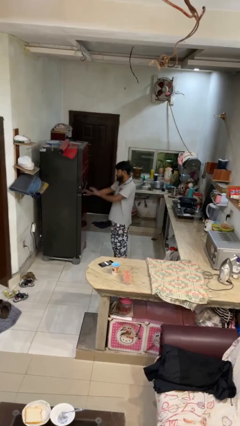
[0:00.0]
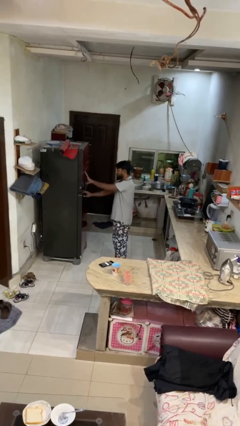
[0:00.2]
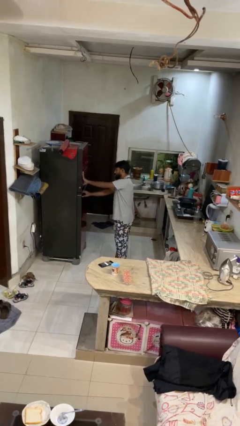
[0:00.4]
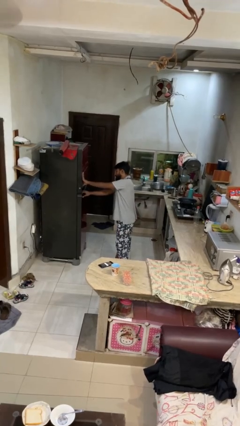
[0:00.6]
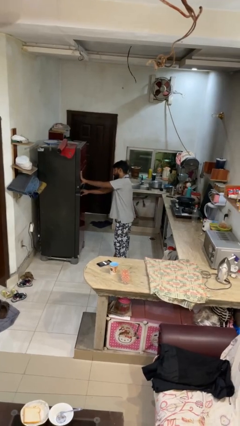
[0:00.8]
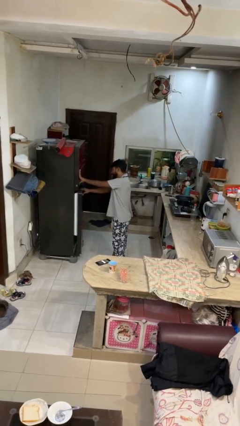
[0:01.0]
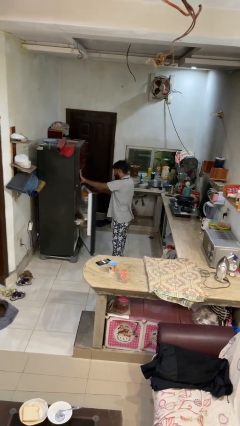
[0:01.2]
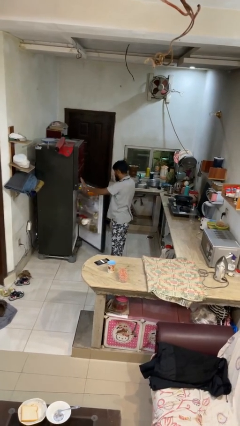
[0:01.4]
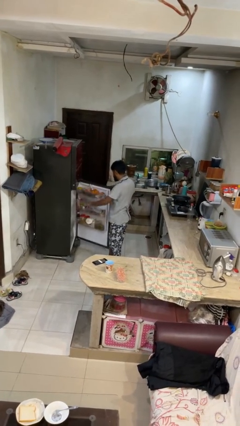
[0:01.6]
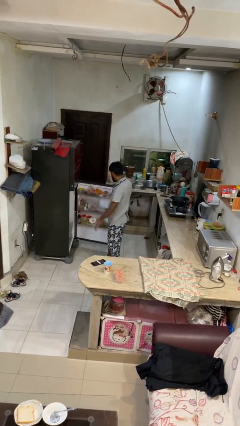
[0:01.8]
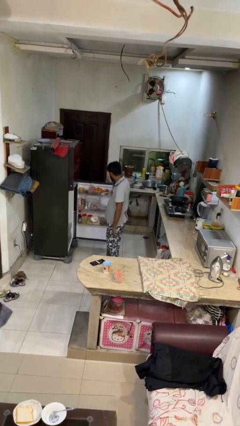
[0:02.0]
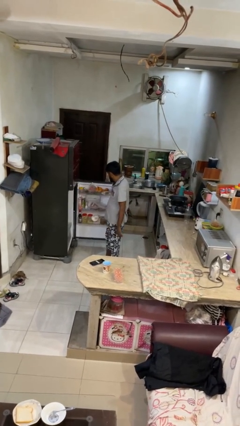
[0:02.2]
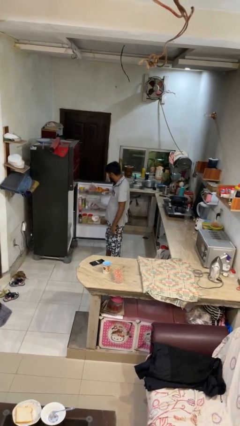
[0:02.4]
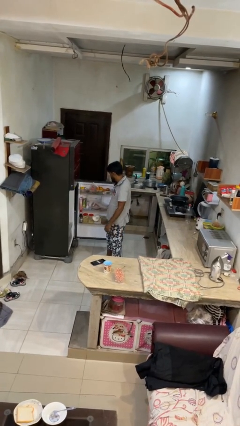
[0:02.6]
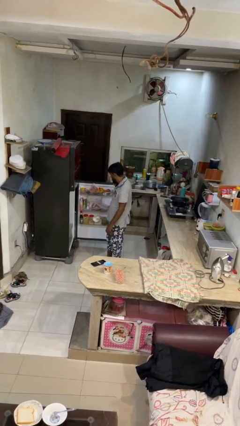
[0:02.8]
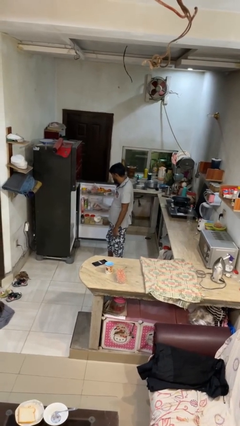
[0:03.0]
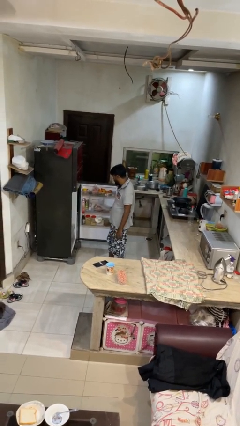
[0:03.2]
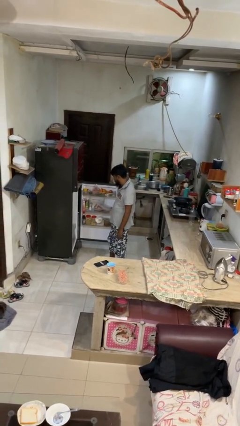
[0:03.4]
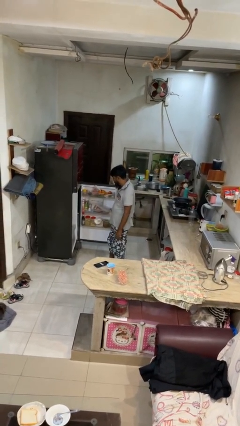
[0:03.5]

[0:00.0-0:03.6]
person opens refrigerator

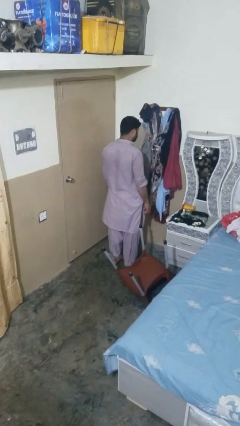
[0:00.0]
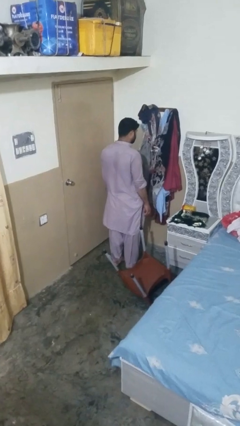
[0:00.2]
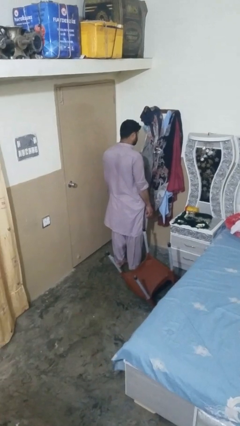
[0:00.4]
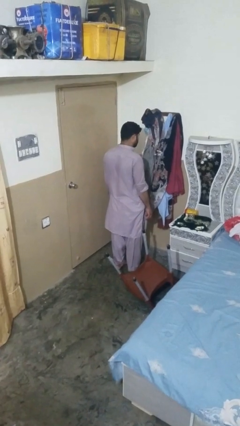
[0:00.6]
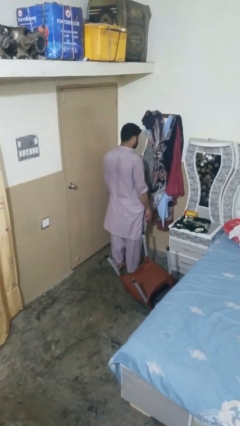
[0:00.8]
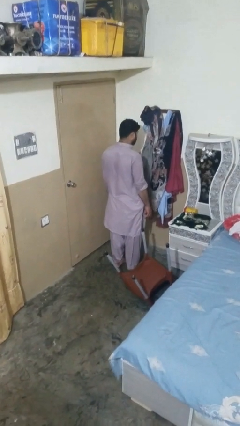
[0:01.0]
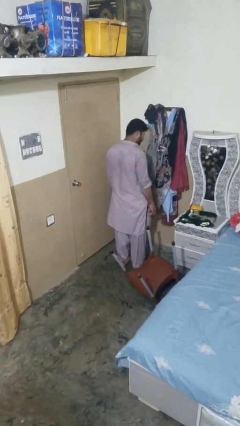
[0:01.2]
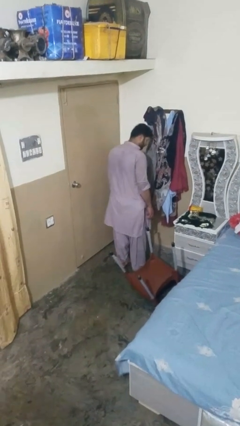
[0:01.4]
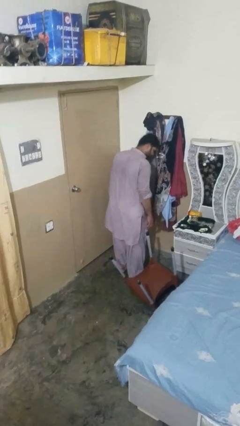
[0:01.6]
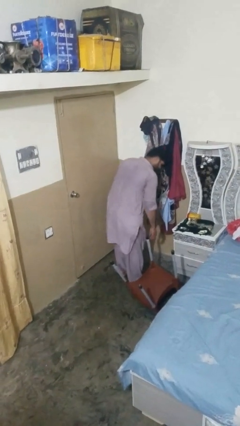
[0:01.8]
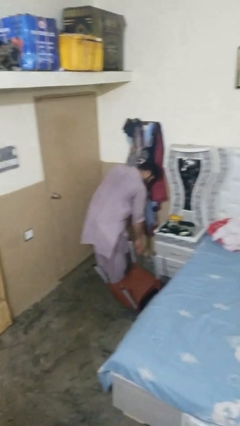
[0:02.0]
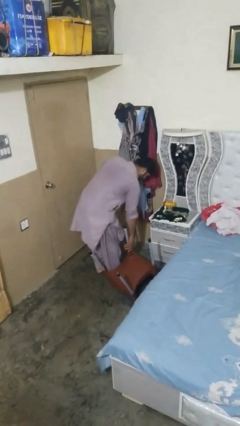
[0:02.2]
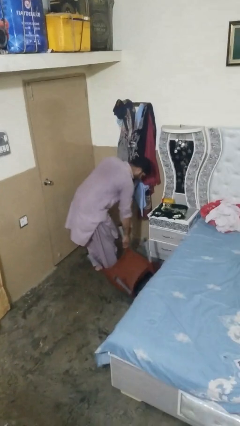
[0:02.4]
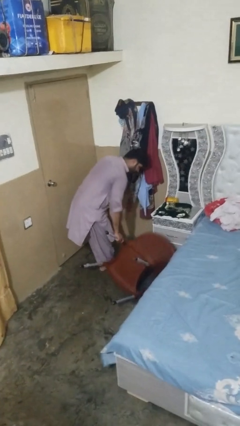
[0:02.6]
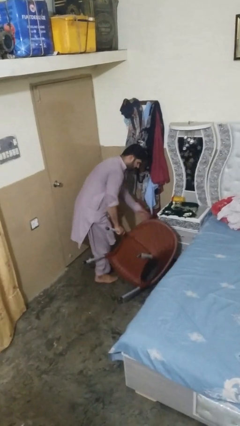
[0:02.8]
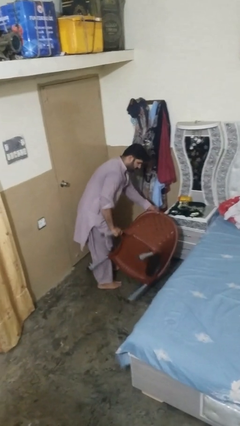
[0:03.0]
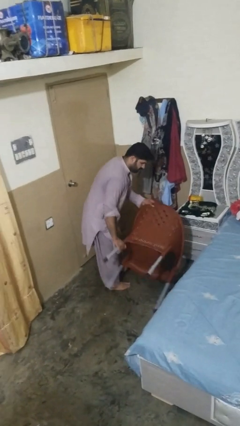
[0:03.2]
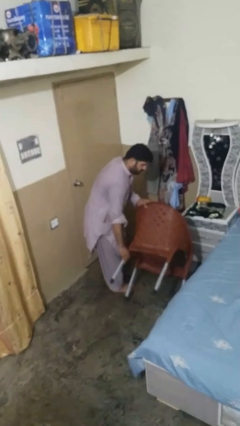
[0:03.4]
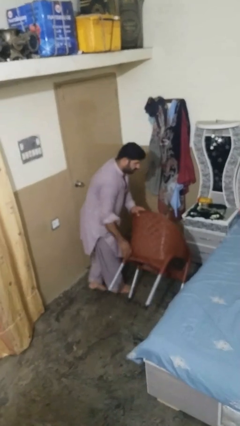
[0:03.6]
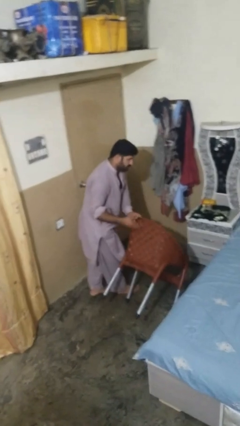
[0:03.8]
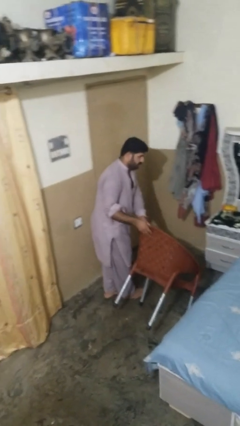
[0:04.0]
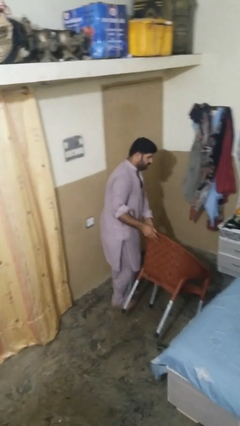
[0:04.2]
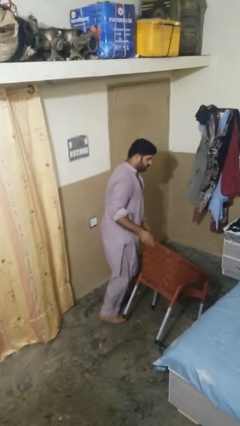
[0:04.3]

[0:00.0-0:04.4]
person sets upright furniture

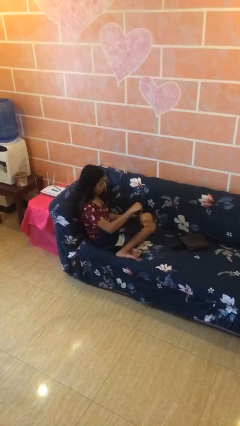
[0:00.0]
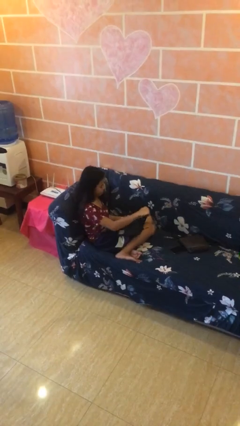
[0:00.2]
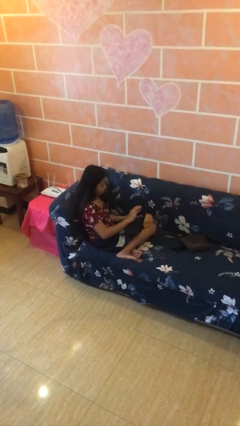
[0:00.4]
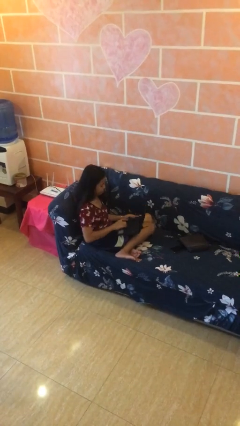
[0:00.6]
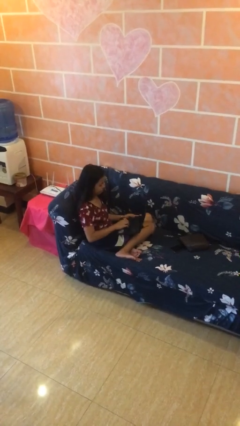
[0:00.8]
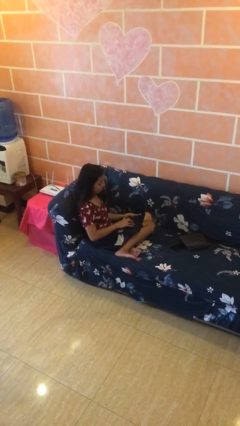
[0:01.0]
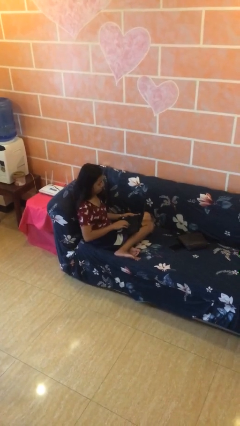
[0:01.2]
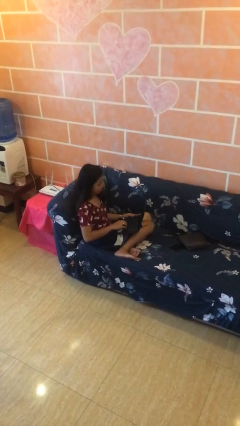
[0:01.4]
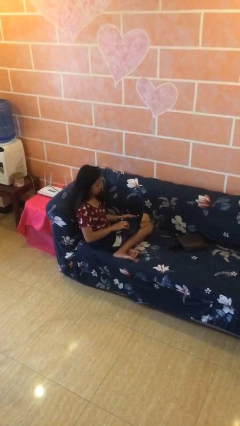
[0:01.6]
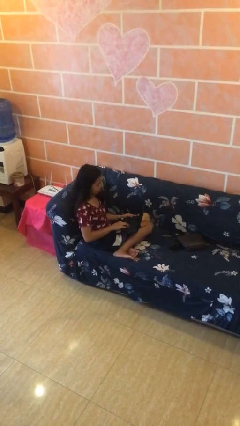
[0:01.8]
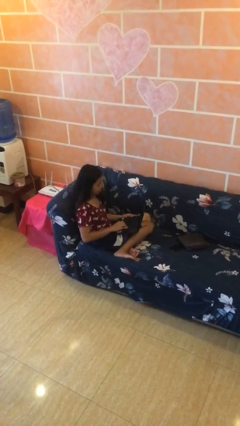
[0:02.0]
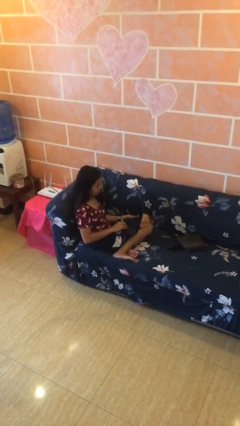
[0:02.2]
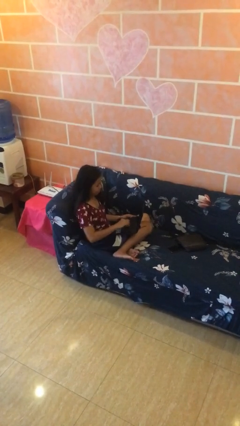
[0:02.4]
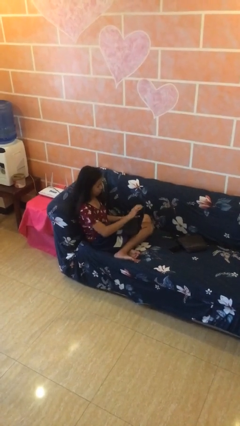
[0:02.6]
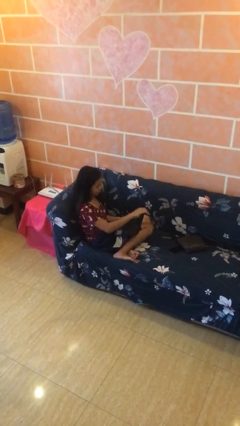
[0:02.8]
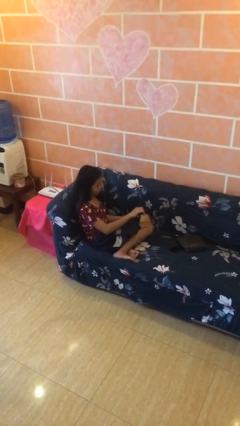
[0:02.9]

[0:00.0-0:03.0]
person interacts with laptop

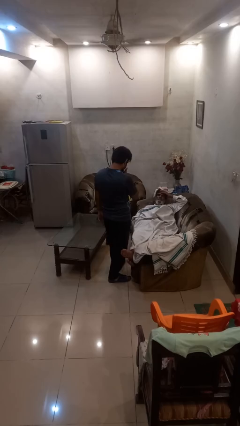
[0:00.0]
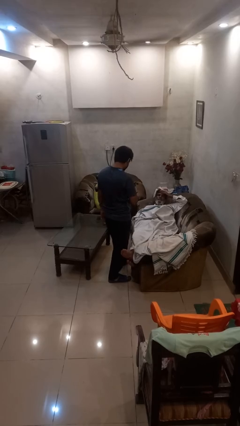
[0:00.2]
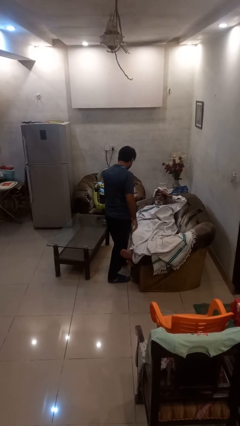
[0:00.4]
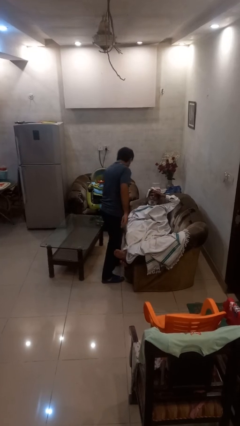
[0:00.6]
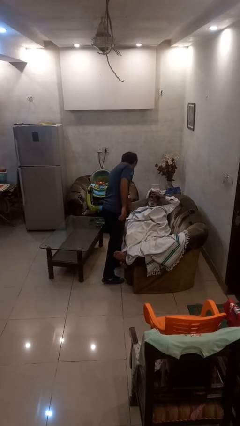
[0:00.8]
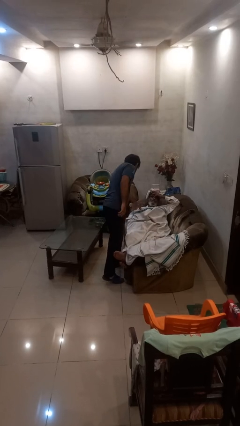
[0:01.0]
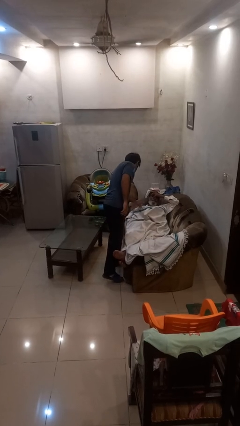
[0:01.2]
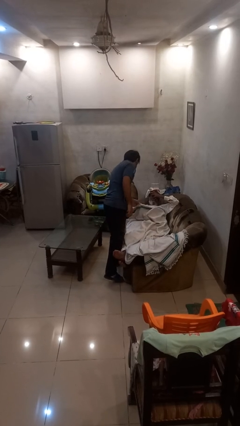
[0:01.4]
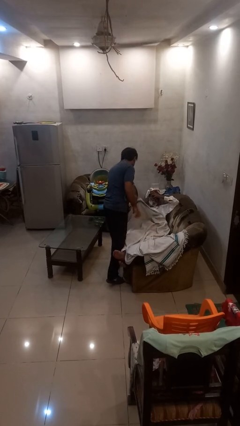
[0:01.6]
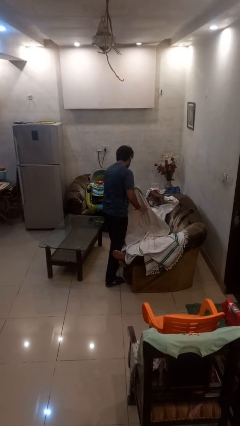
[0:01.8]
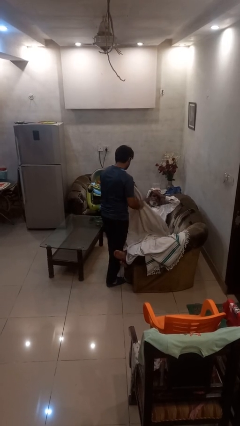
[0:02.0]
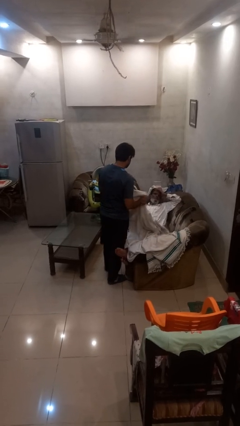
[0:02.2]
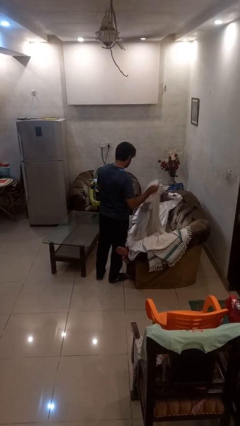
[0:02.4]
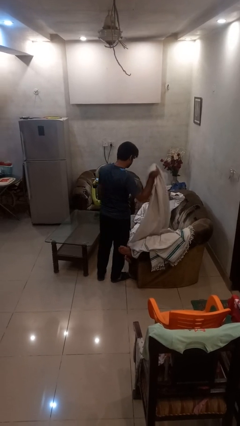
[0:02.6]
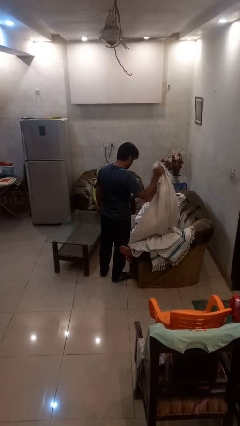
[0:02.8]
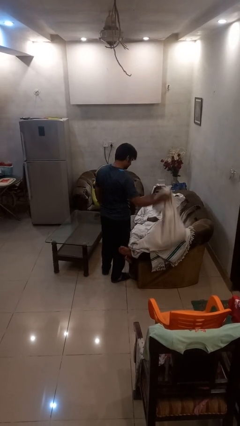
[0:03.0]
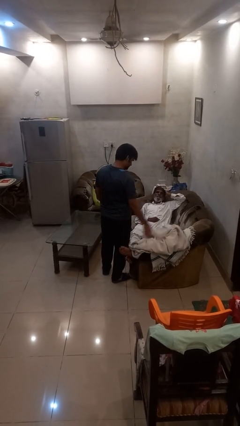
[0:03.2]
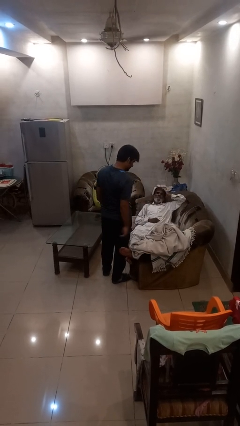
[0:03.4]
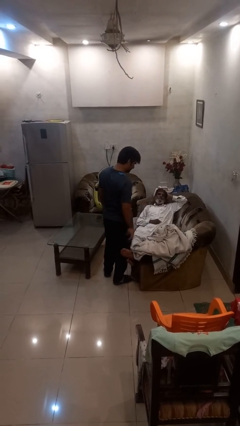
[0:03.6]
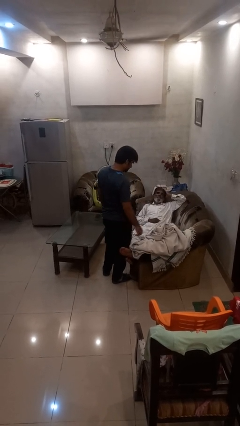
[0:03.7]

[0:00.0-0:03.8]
person uncovers friend with blanket

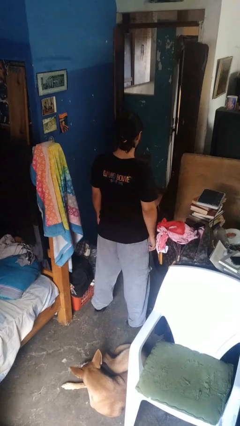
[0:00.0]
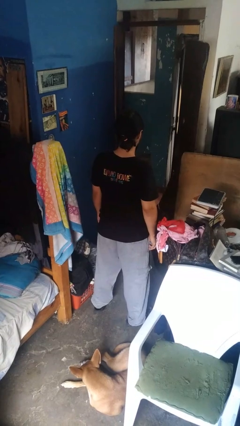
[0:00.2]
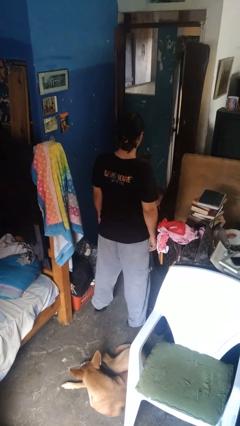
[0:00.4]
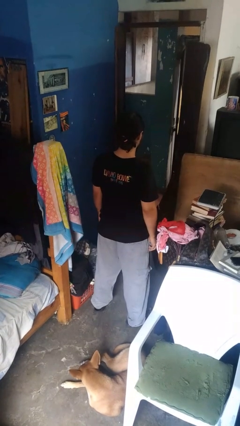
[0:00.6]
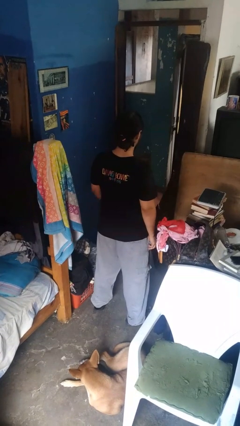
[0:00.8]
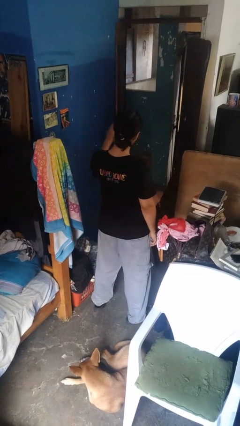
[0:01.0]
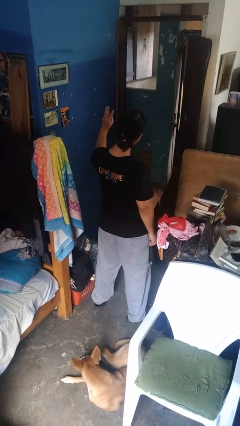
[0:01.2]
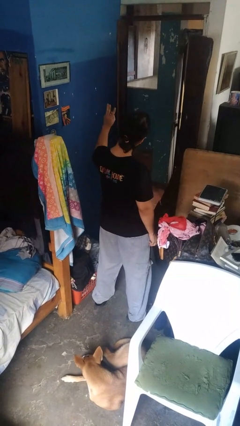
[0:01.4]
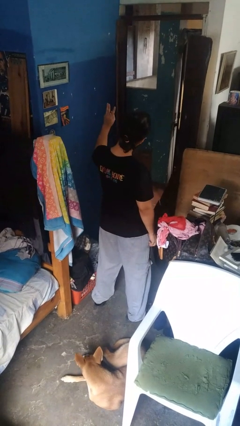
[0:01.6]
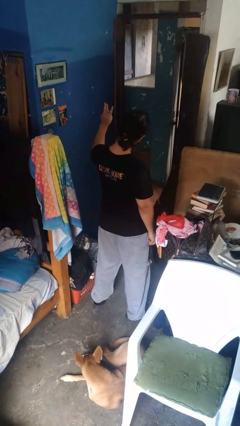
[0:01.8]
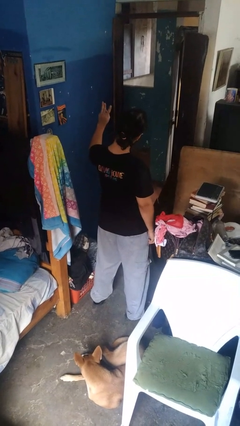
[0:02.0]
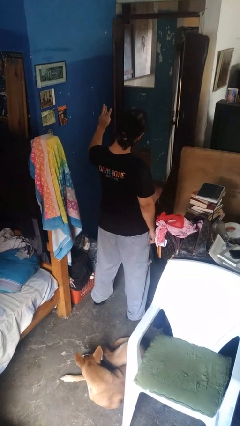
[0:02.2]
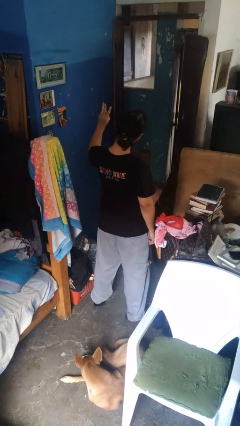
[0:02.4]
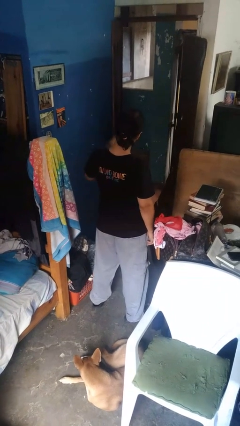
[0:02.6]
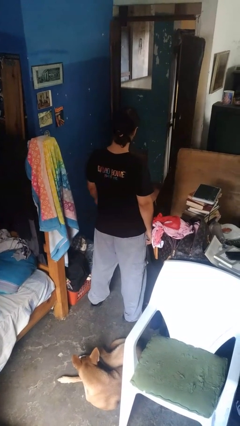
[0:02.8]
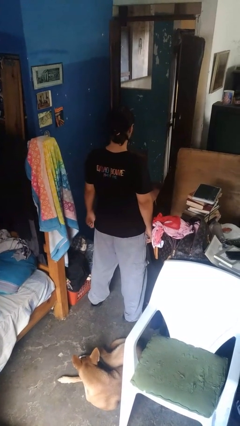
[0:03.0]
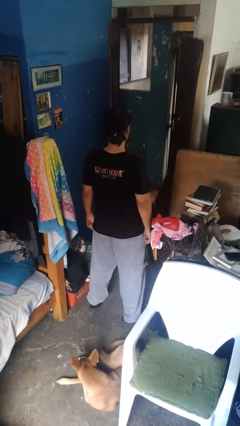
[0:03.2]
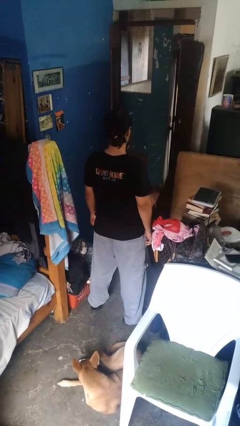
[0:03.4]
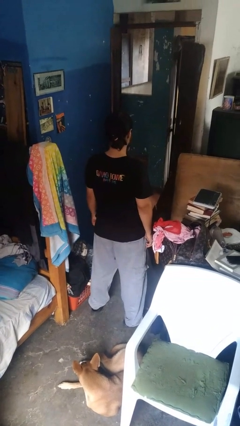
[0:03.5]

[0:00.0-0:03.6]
person gestures number three
